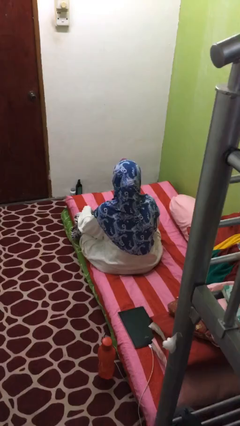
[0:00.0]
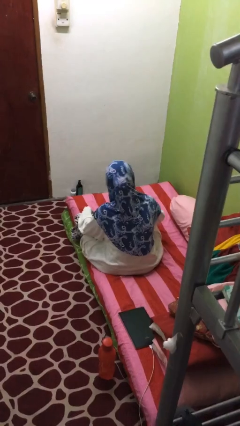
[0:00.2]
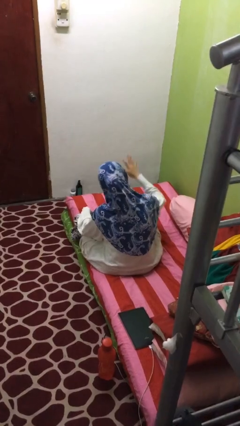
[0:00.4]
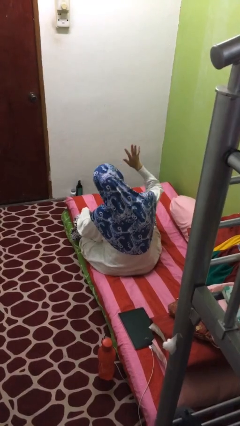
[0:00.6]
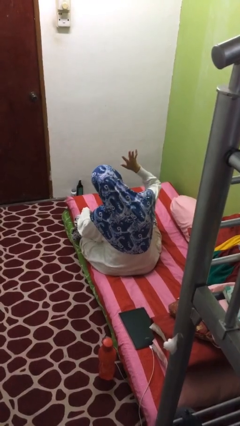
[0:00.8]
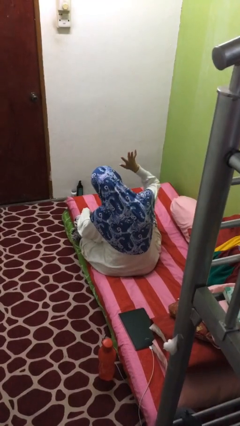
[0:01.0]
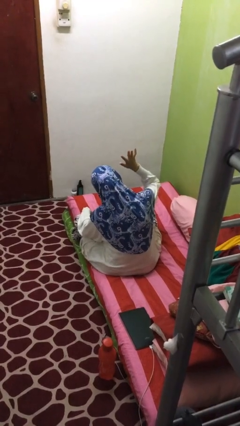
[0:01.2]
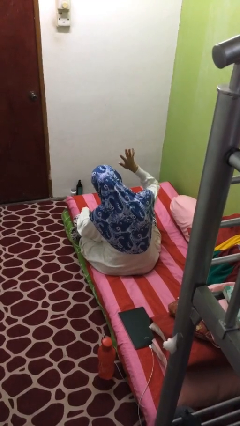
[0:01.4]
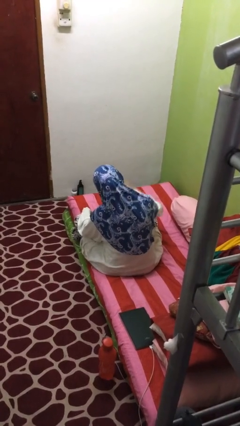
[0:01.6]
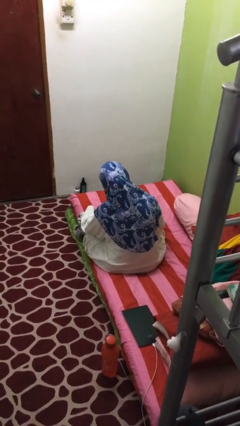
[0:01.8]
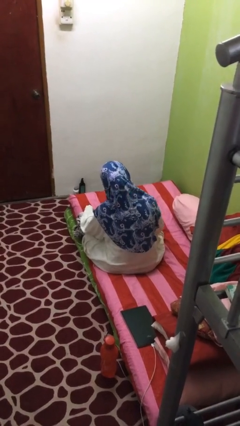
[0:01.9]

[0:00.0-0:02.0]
person gestures number five

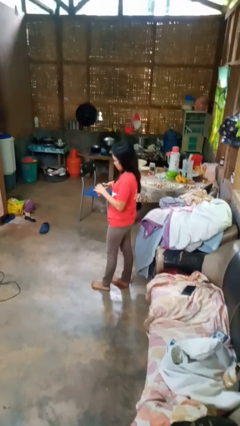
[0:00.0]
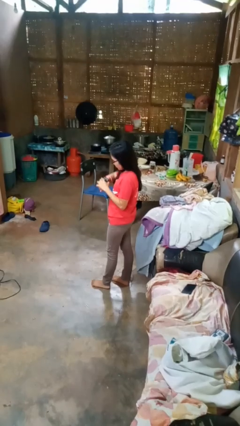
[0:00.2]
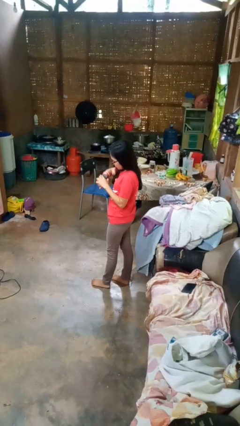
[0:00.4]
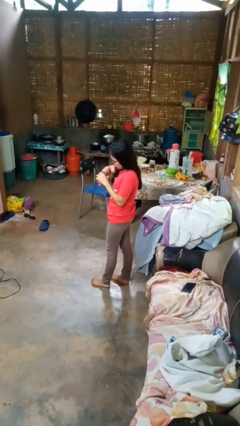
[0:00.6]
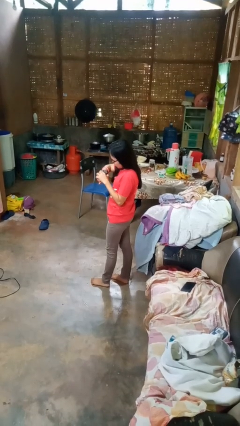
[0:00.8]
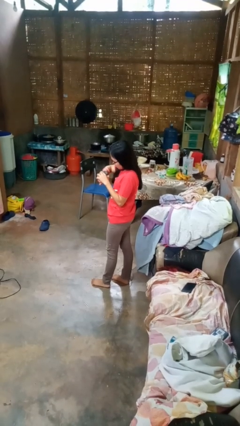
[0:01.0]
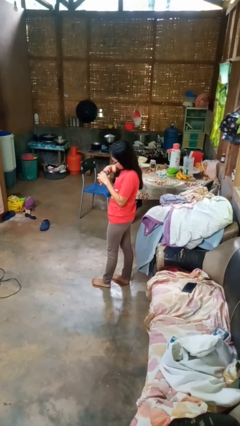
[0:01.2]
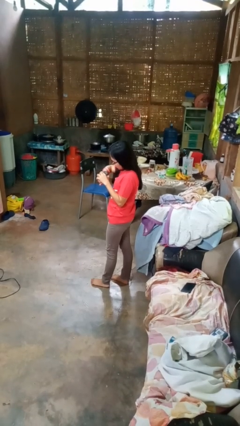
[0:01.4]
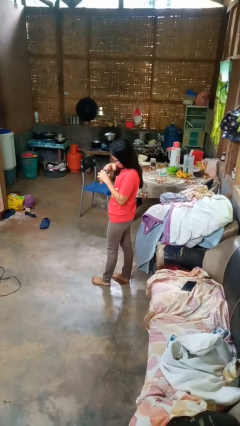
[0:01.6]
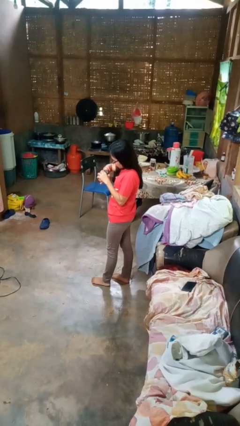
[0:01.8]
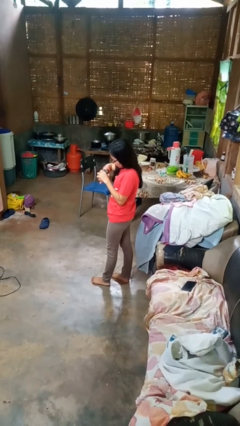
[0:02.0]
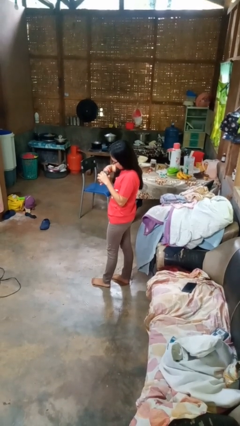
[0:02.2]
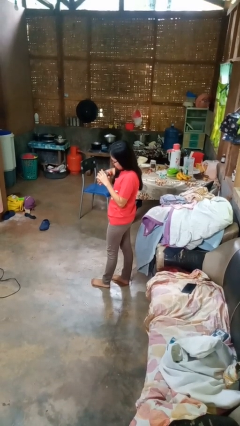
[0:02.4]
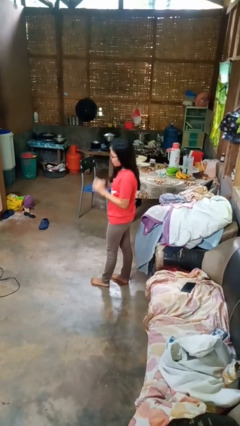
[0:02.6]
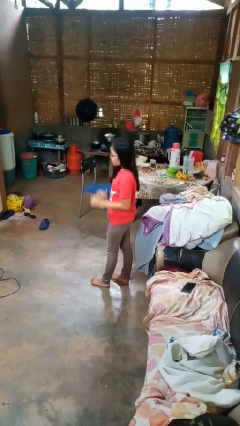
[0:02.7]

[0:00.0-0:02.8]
person looks at wristwatch

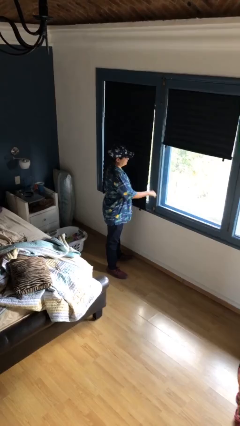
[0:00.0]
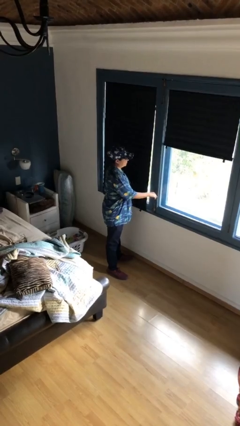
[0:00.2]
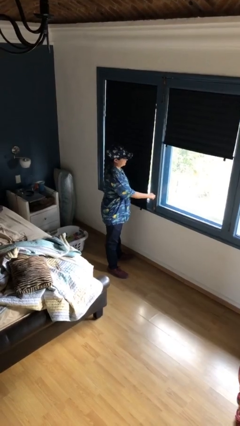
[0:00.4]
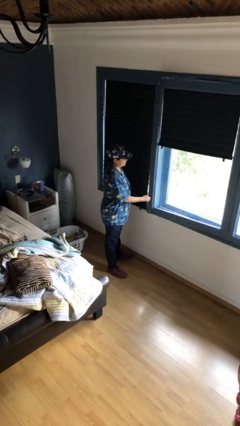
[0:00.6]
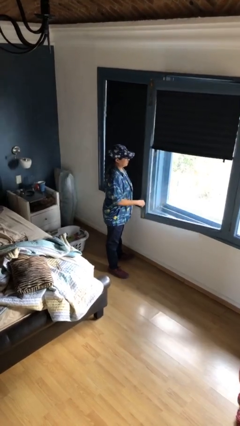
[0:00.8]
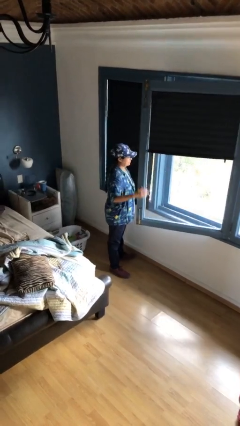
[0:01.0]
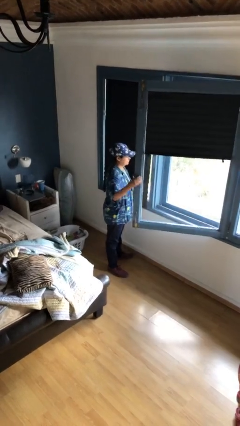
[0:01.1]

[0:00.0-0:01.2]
person opens home window

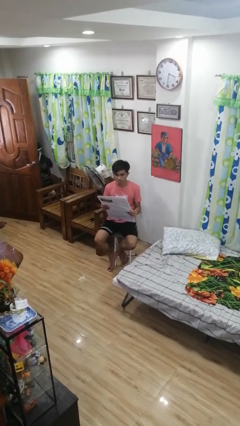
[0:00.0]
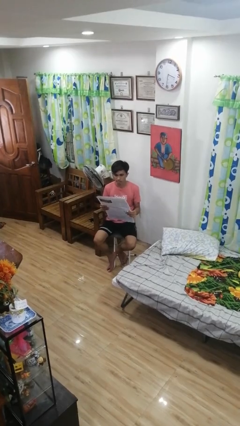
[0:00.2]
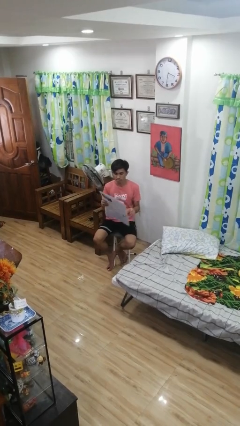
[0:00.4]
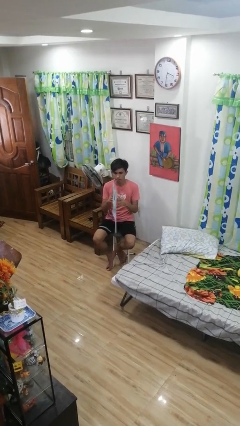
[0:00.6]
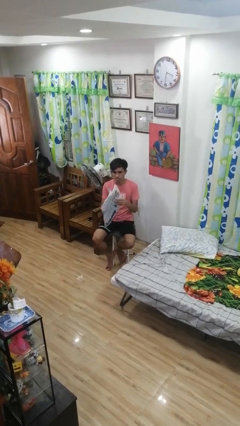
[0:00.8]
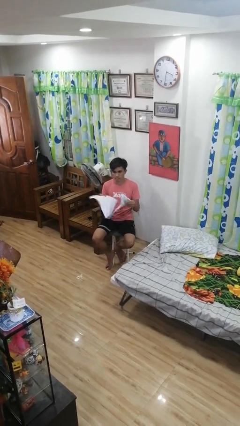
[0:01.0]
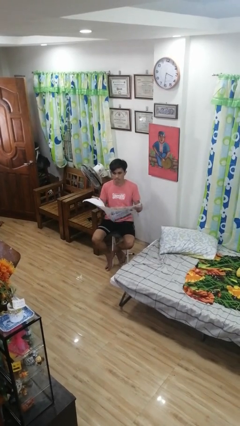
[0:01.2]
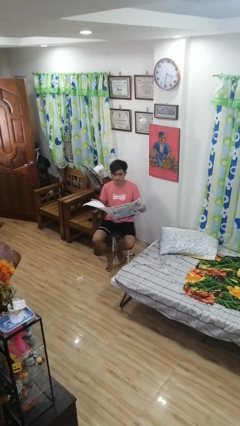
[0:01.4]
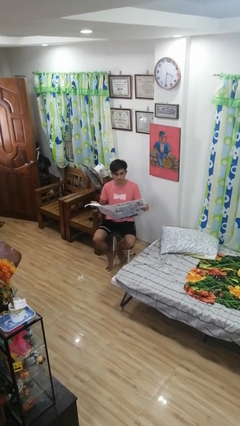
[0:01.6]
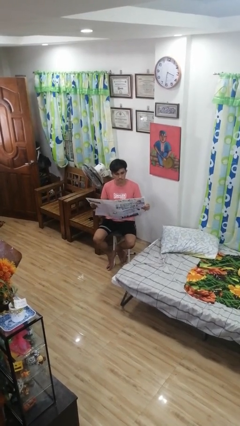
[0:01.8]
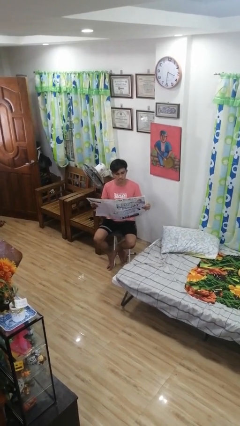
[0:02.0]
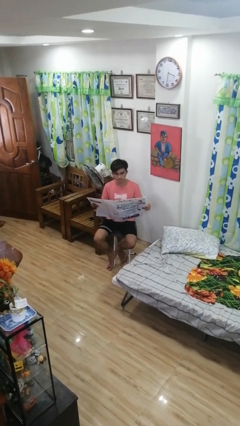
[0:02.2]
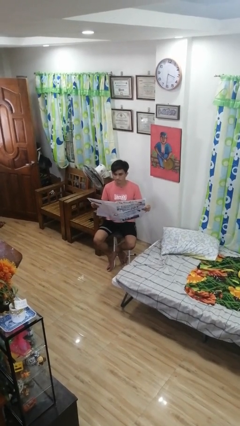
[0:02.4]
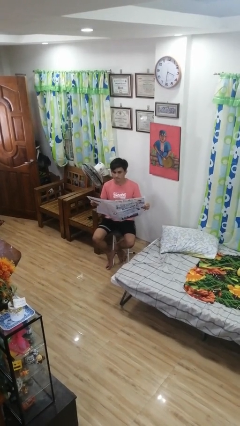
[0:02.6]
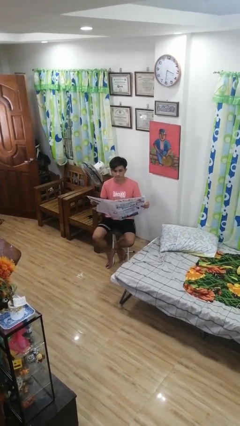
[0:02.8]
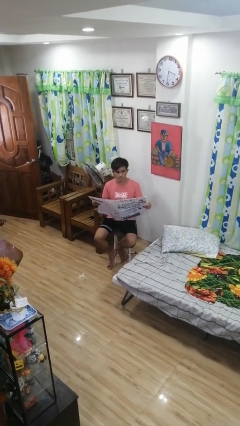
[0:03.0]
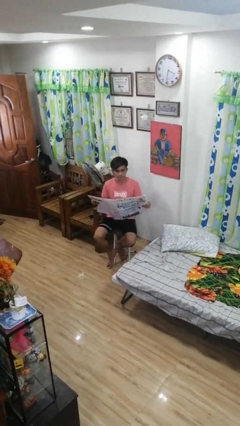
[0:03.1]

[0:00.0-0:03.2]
person reads newspaper

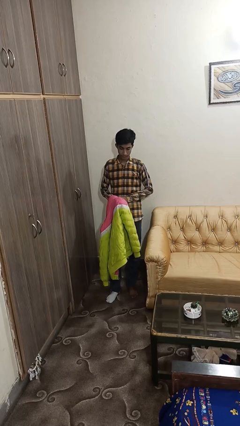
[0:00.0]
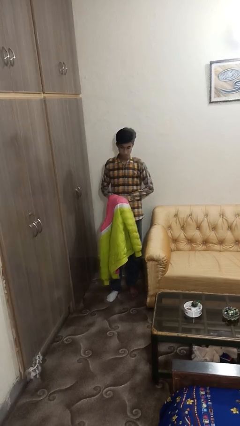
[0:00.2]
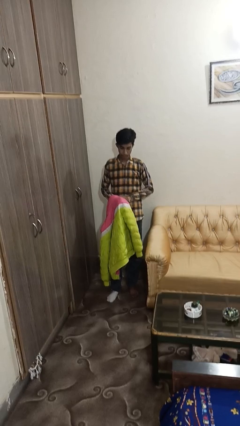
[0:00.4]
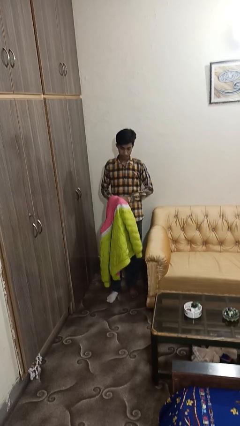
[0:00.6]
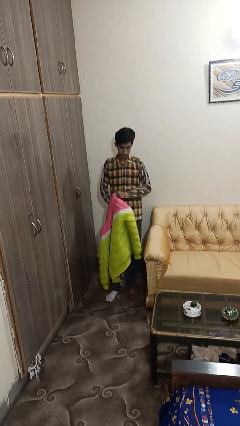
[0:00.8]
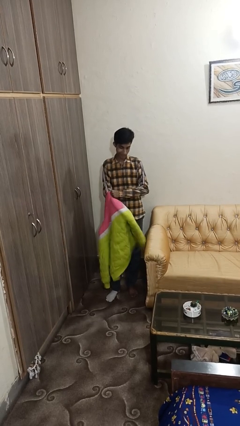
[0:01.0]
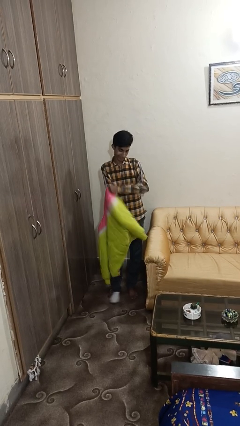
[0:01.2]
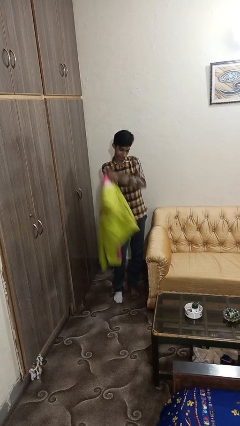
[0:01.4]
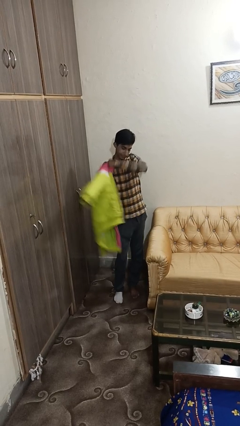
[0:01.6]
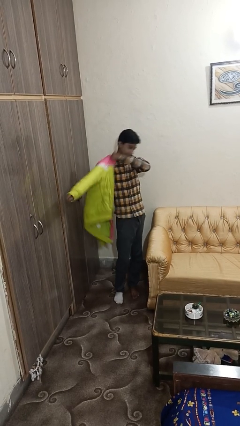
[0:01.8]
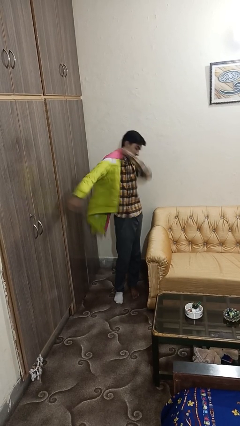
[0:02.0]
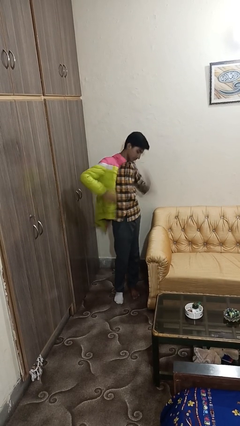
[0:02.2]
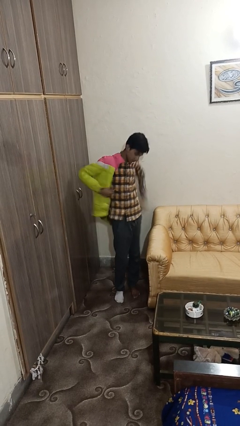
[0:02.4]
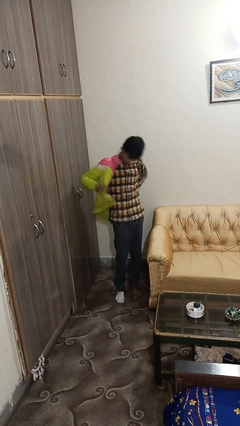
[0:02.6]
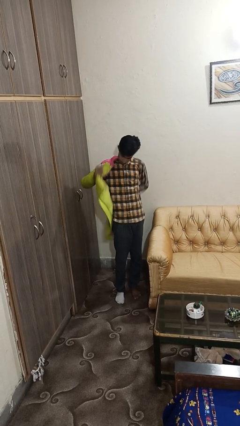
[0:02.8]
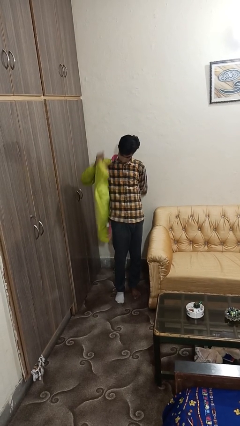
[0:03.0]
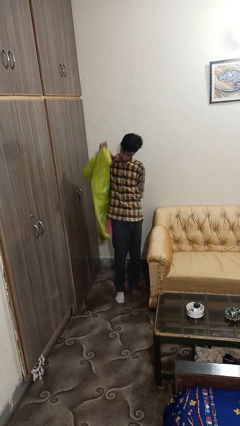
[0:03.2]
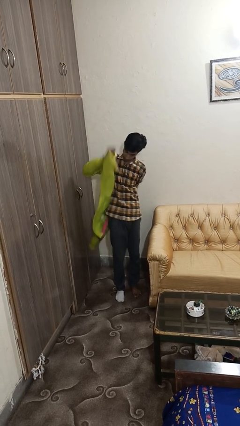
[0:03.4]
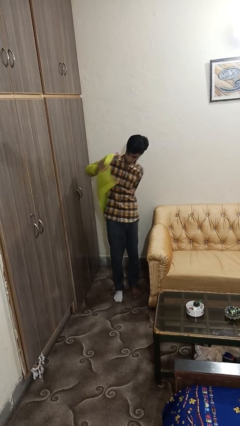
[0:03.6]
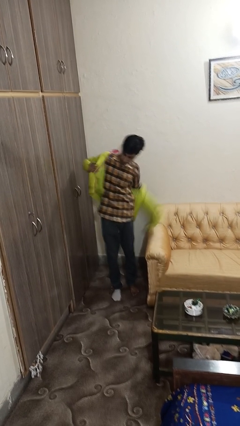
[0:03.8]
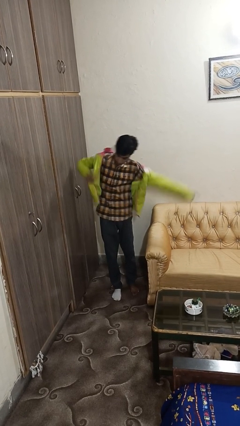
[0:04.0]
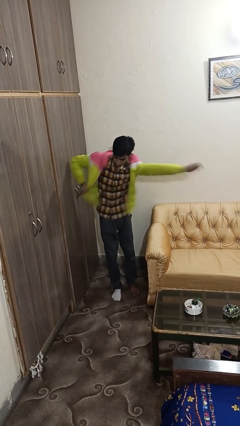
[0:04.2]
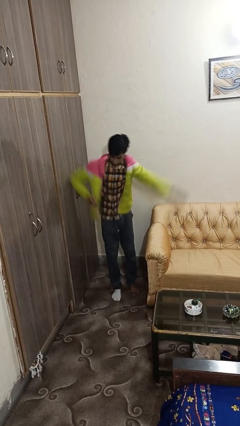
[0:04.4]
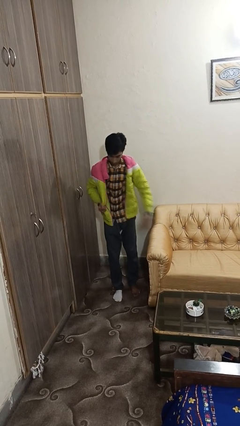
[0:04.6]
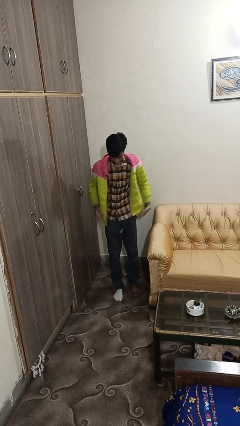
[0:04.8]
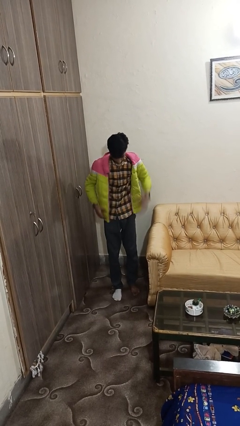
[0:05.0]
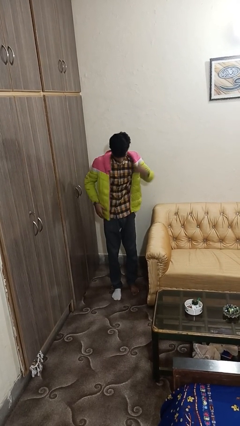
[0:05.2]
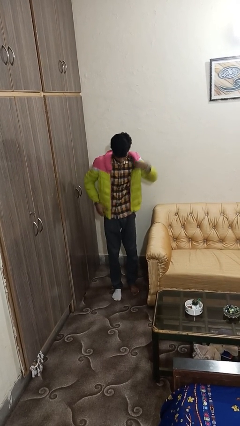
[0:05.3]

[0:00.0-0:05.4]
person puts on jacket

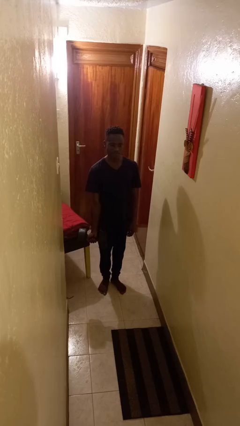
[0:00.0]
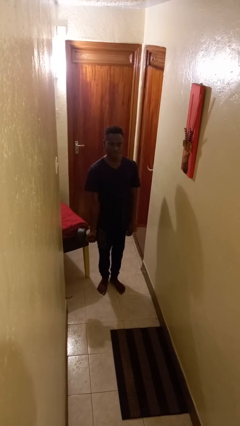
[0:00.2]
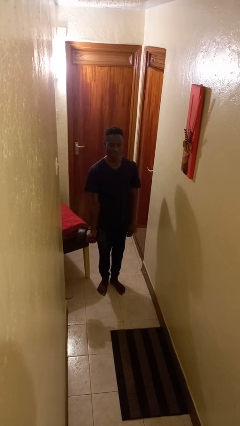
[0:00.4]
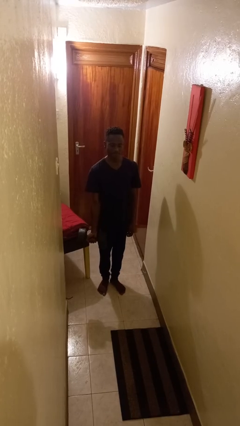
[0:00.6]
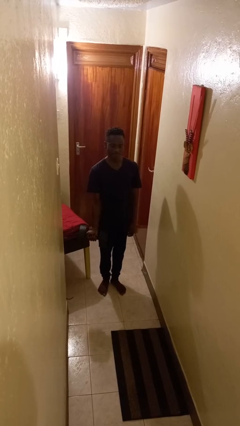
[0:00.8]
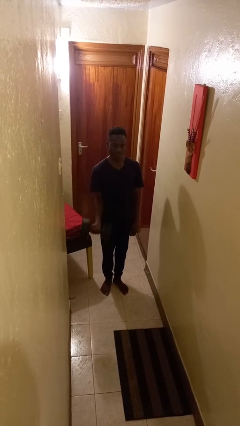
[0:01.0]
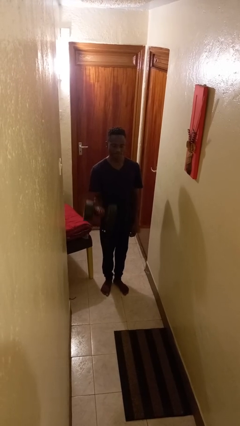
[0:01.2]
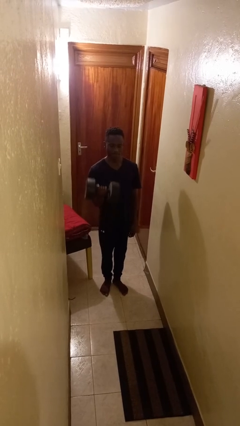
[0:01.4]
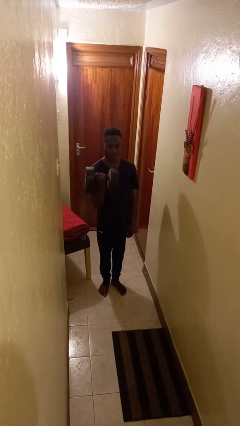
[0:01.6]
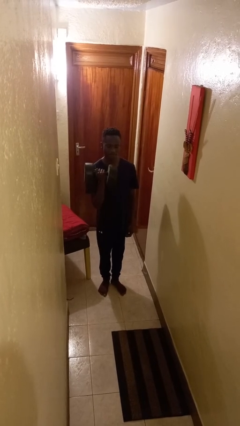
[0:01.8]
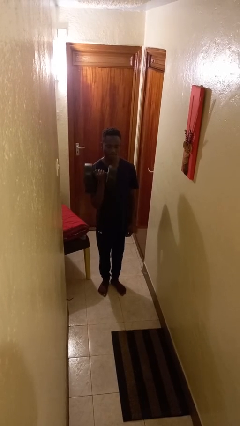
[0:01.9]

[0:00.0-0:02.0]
person lifts dumbbells

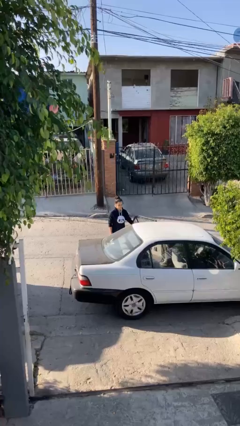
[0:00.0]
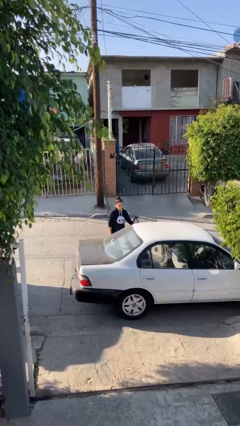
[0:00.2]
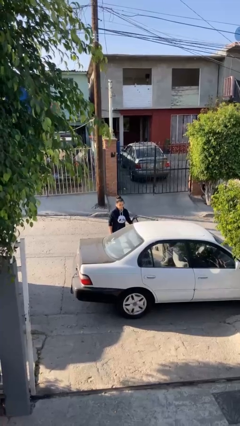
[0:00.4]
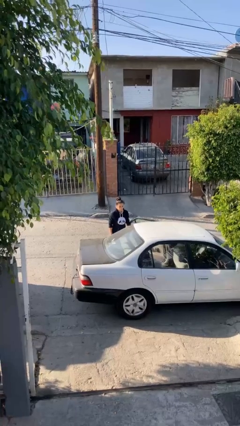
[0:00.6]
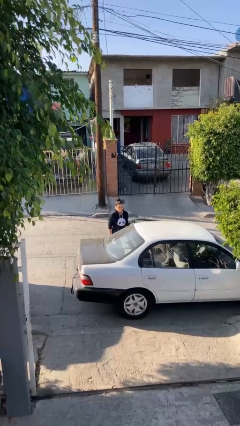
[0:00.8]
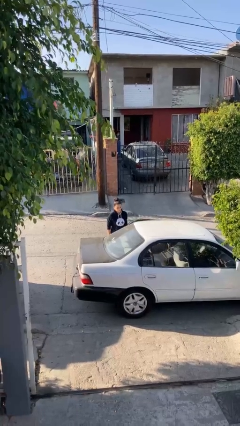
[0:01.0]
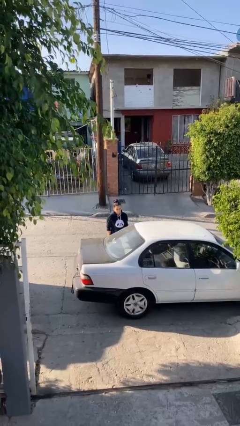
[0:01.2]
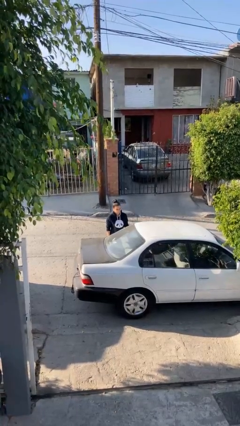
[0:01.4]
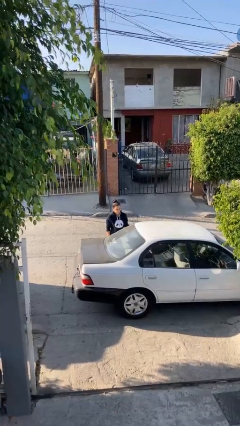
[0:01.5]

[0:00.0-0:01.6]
person closes car door
